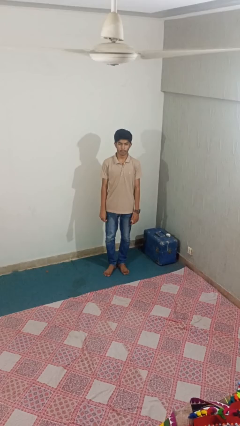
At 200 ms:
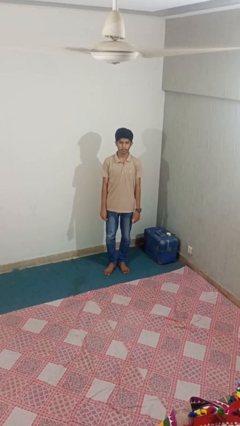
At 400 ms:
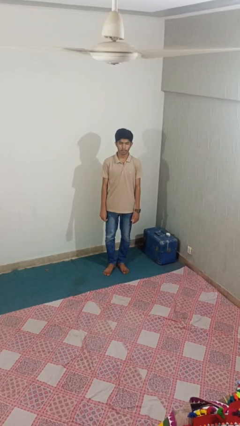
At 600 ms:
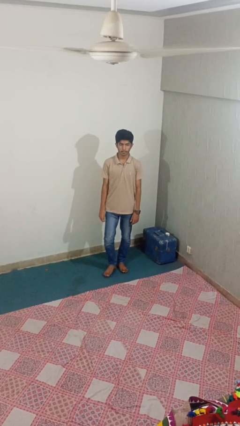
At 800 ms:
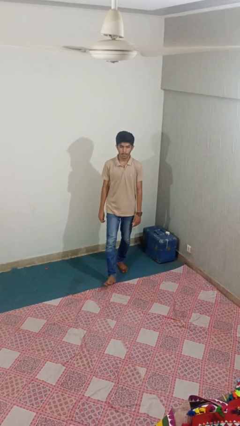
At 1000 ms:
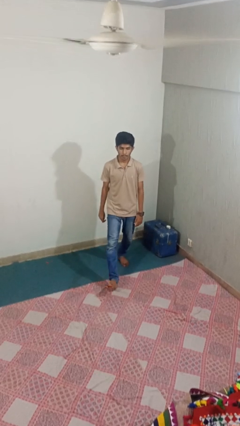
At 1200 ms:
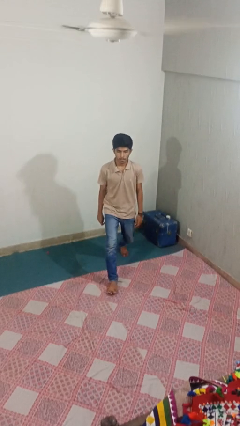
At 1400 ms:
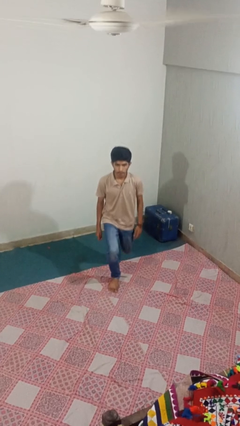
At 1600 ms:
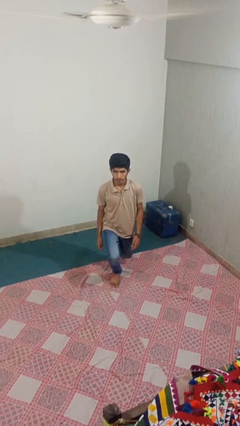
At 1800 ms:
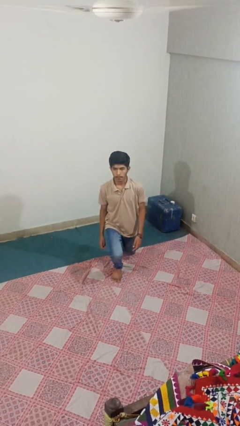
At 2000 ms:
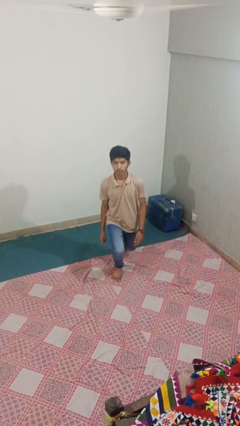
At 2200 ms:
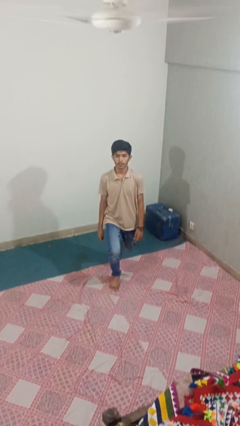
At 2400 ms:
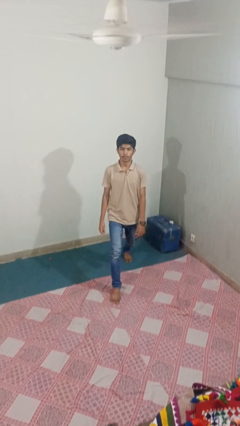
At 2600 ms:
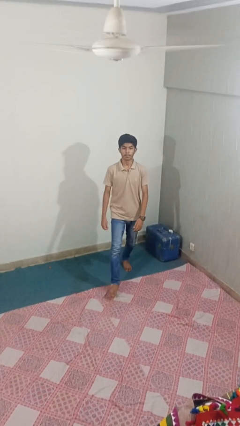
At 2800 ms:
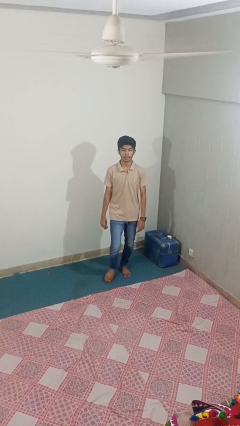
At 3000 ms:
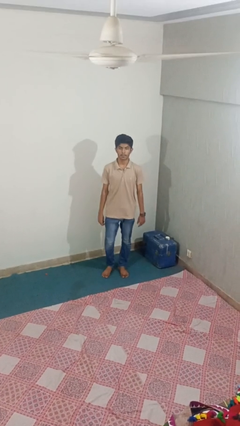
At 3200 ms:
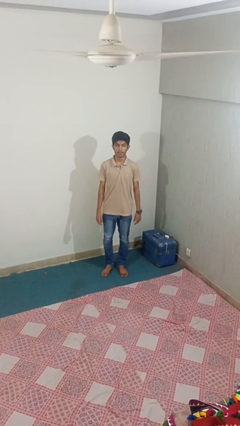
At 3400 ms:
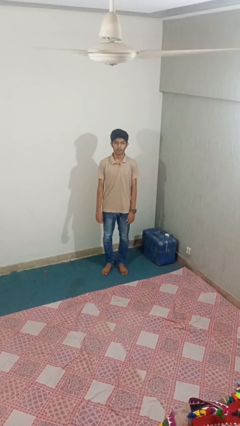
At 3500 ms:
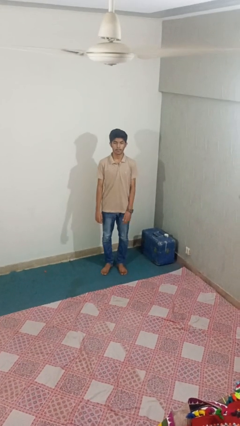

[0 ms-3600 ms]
person exercises with lunges

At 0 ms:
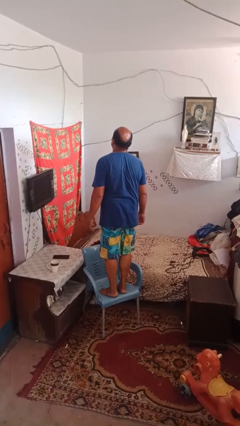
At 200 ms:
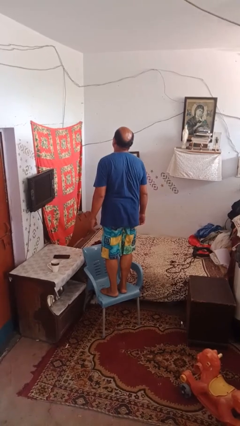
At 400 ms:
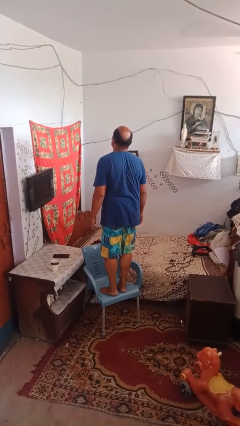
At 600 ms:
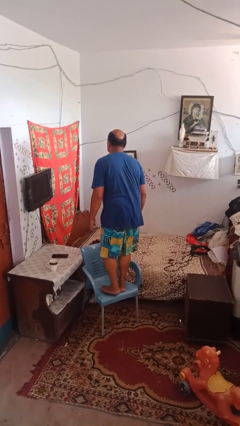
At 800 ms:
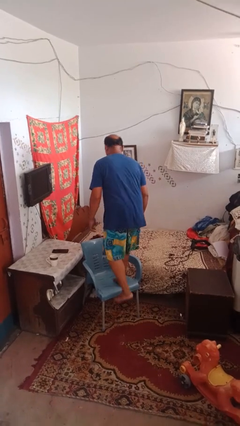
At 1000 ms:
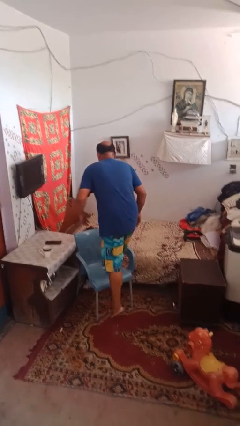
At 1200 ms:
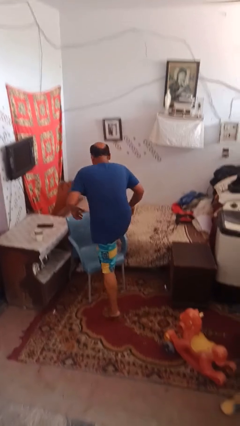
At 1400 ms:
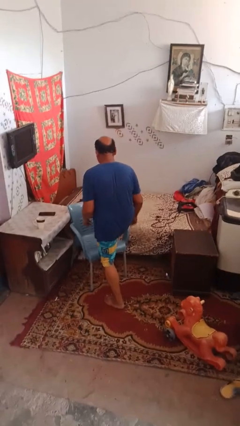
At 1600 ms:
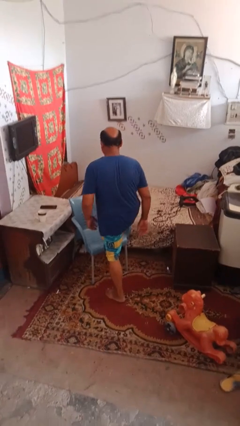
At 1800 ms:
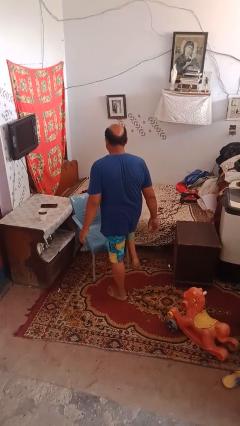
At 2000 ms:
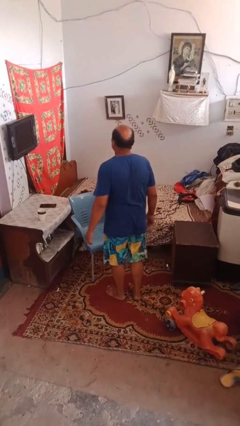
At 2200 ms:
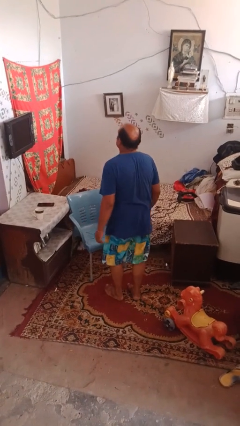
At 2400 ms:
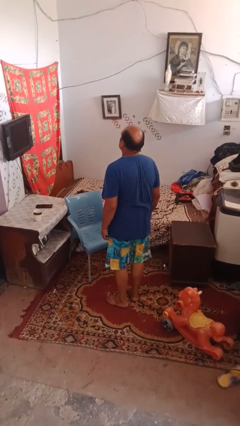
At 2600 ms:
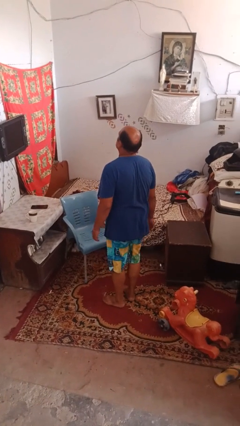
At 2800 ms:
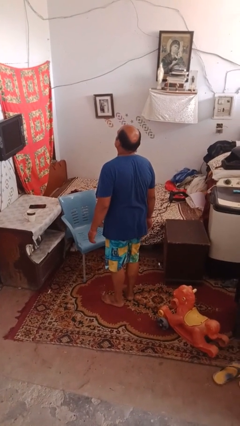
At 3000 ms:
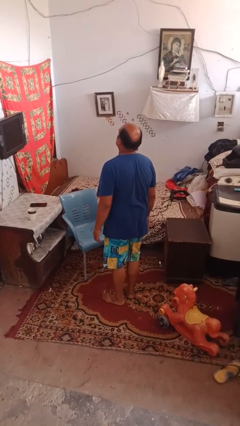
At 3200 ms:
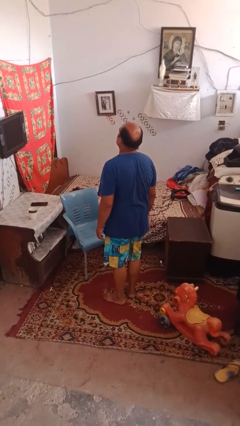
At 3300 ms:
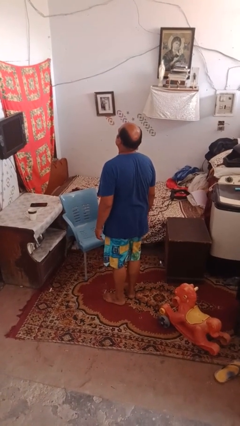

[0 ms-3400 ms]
person climbs off chair

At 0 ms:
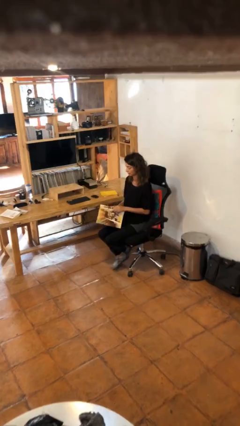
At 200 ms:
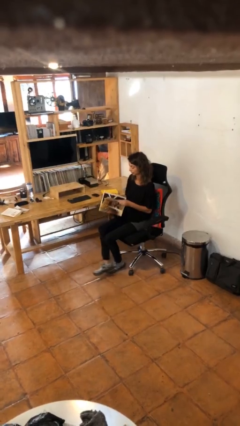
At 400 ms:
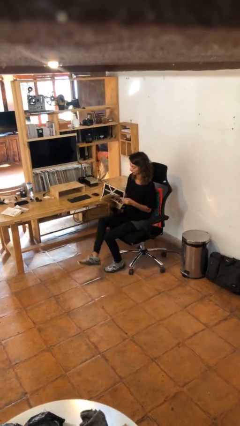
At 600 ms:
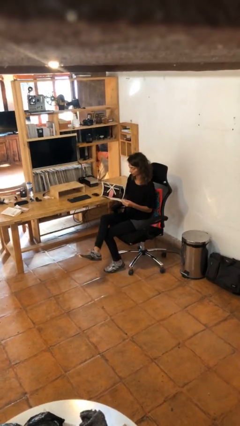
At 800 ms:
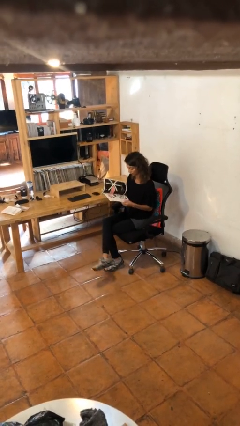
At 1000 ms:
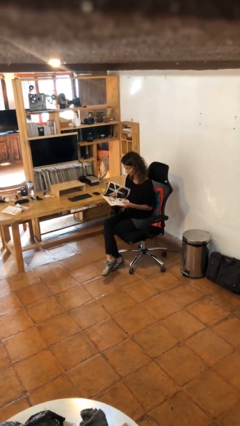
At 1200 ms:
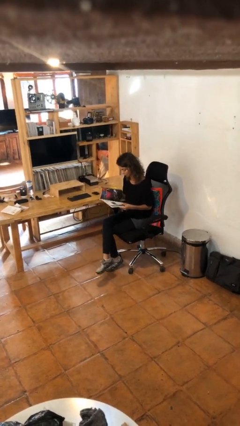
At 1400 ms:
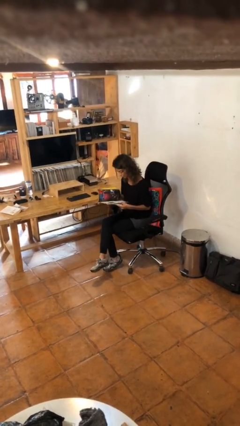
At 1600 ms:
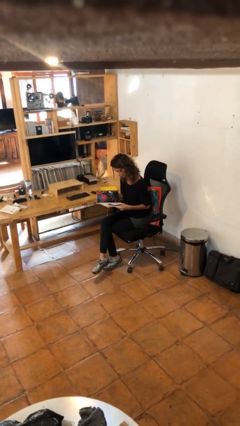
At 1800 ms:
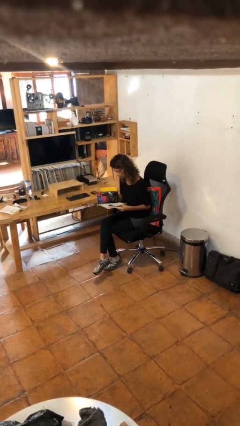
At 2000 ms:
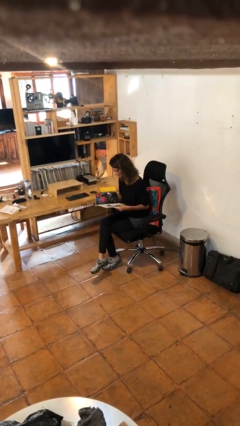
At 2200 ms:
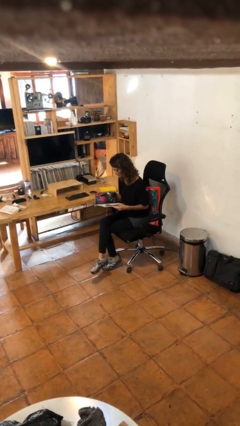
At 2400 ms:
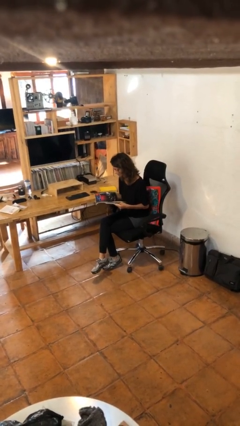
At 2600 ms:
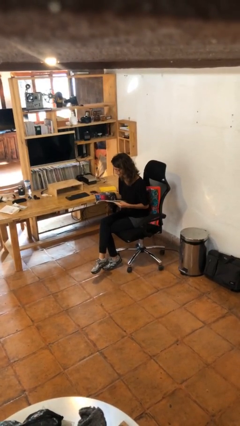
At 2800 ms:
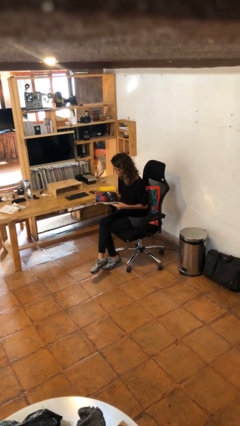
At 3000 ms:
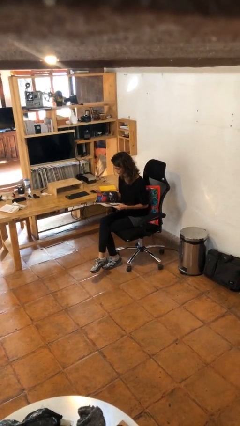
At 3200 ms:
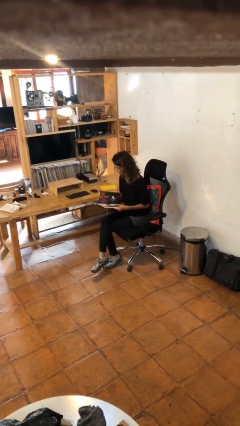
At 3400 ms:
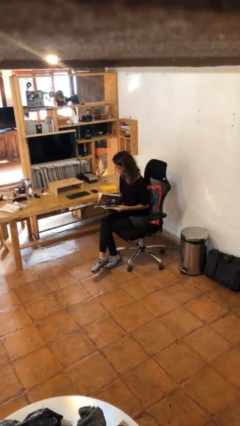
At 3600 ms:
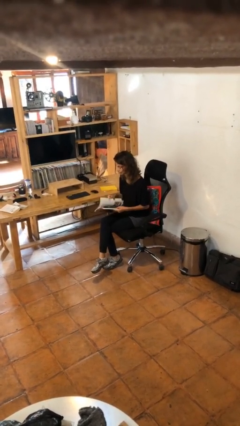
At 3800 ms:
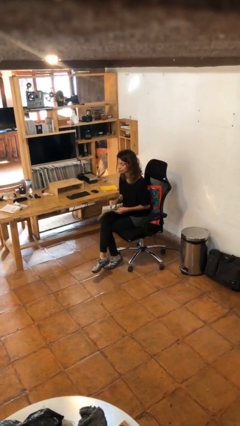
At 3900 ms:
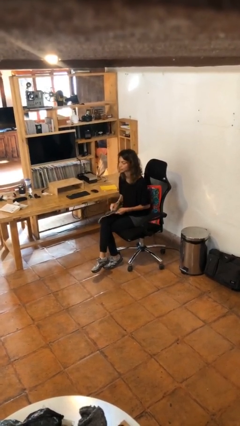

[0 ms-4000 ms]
person reads magazine

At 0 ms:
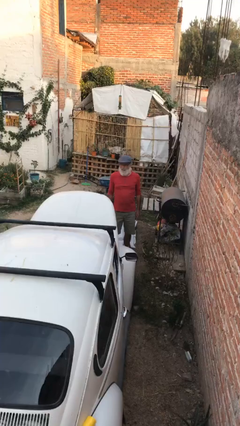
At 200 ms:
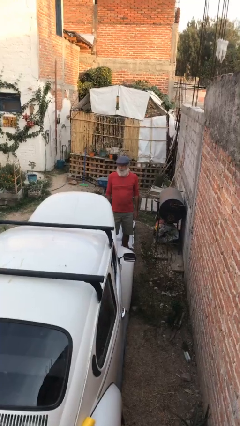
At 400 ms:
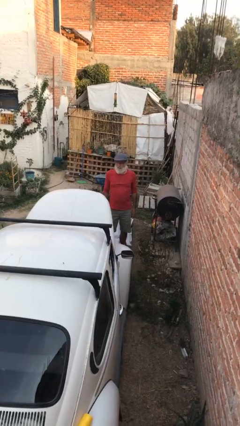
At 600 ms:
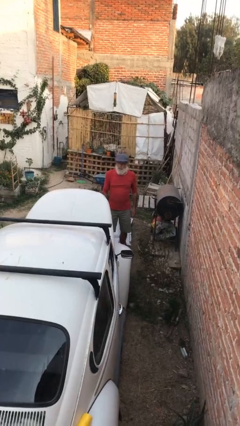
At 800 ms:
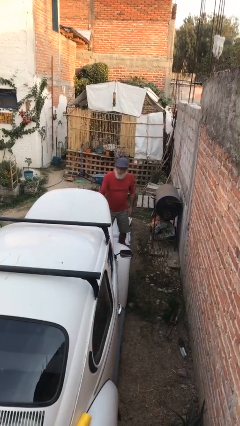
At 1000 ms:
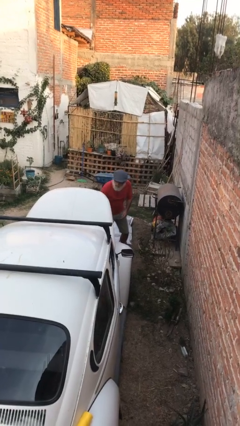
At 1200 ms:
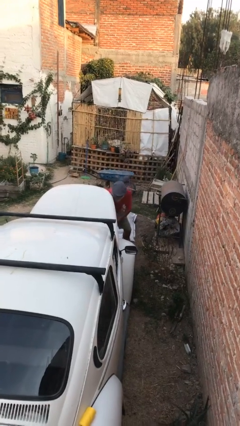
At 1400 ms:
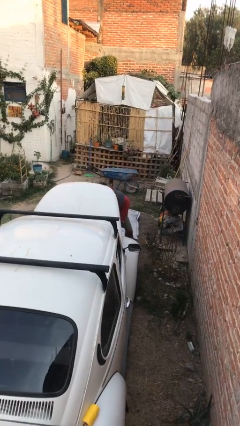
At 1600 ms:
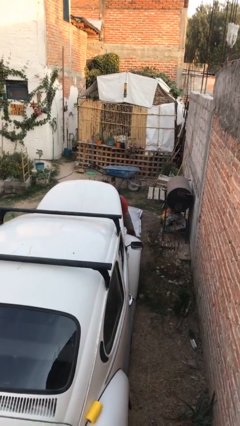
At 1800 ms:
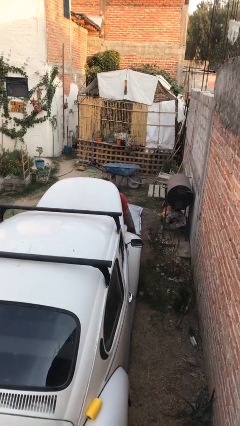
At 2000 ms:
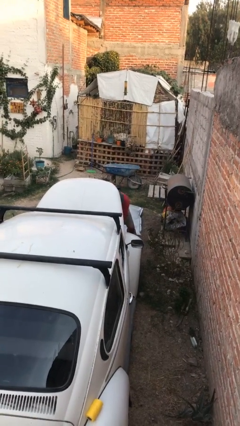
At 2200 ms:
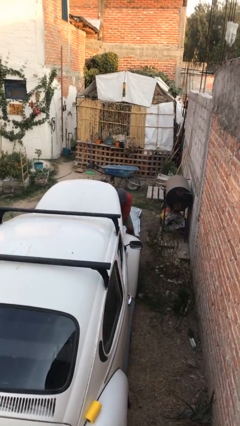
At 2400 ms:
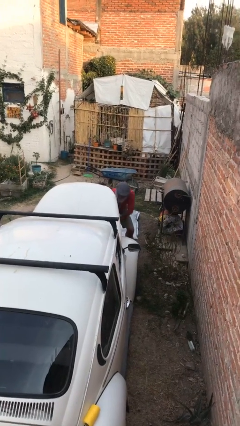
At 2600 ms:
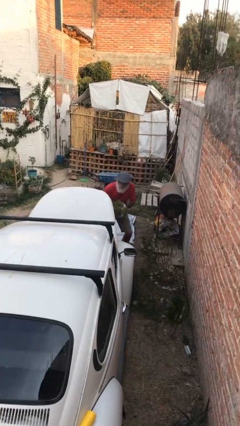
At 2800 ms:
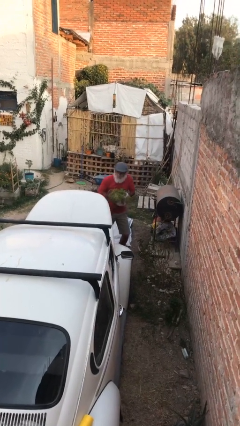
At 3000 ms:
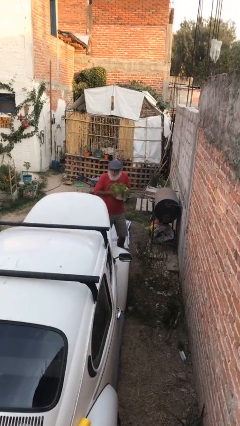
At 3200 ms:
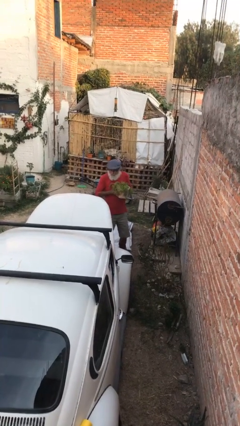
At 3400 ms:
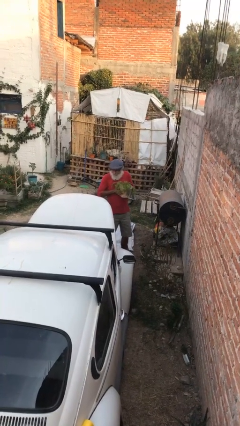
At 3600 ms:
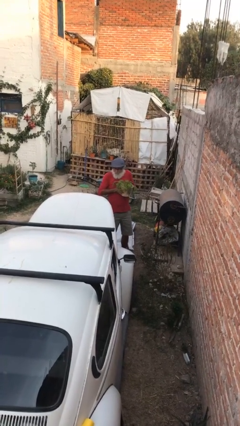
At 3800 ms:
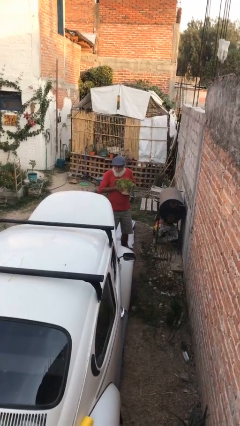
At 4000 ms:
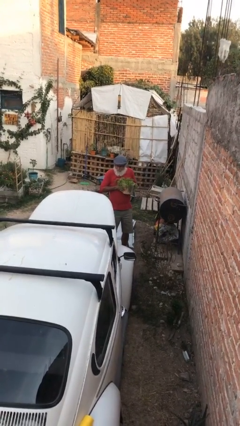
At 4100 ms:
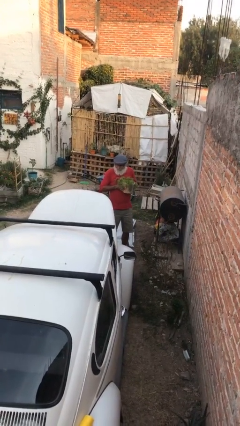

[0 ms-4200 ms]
person unloads car

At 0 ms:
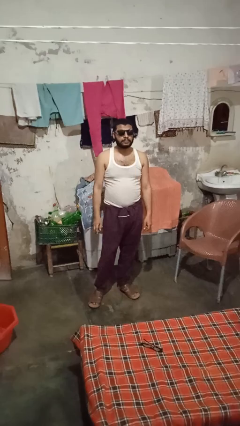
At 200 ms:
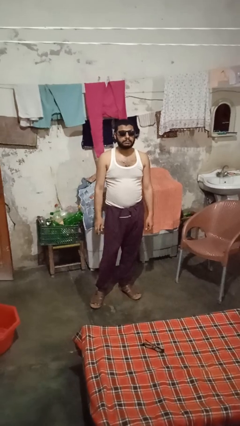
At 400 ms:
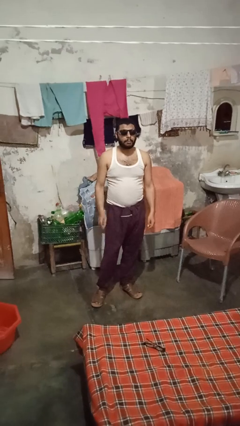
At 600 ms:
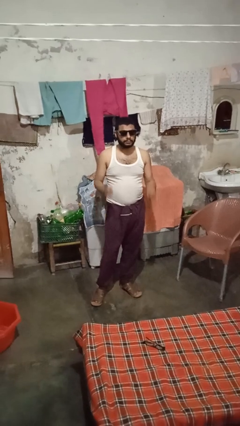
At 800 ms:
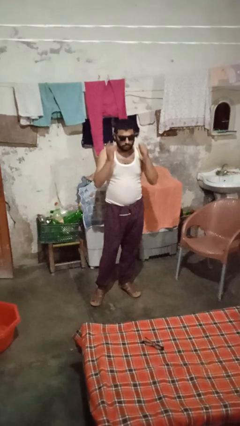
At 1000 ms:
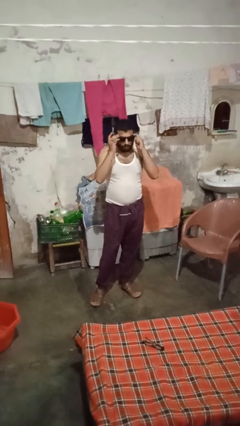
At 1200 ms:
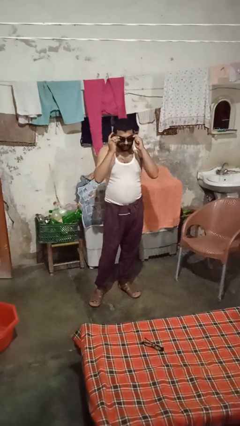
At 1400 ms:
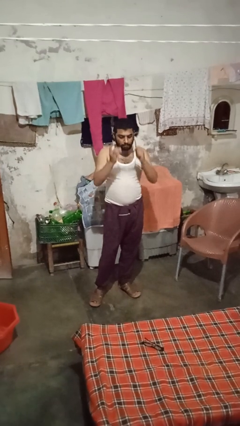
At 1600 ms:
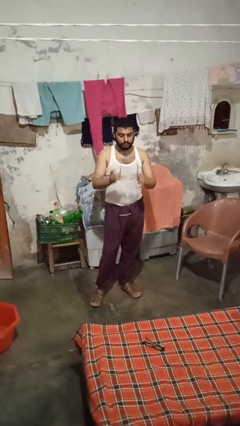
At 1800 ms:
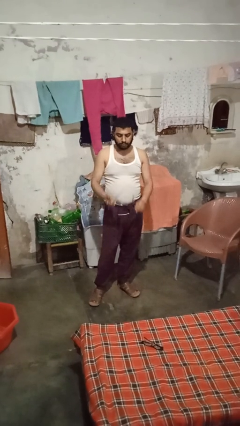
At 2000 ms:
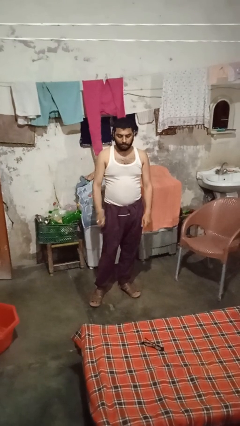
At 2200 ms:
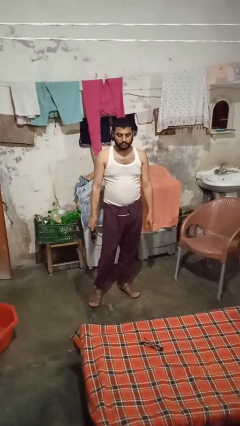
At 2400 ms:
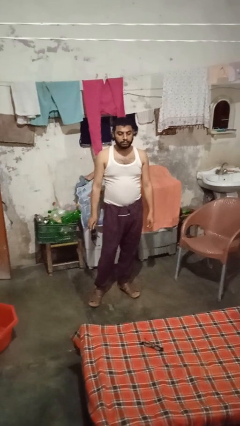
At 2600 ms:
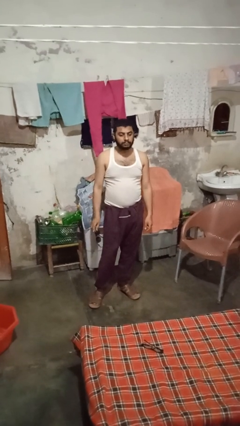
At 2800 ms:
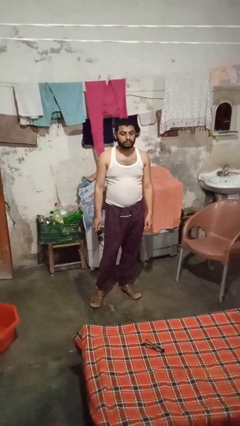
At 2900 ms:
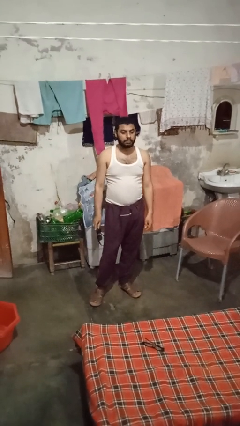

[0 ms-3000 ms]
person takes off sunglasses
